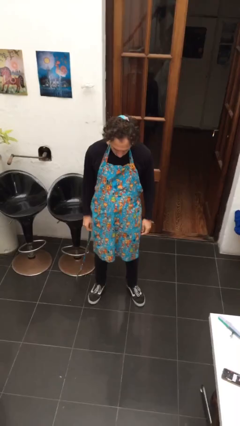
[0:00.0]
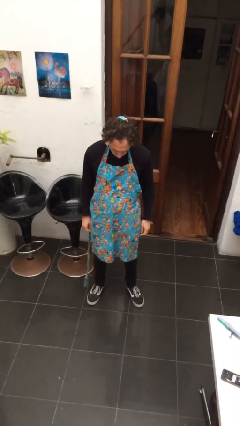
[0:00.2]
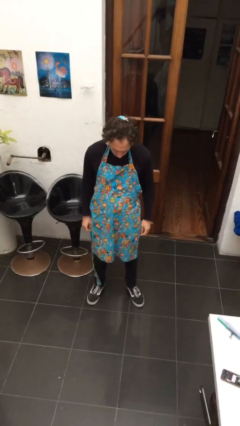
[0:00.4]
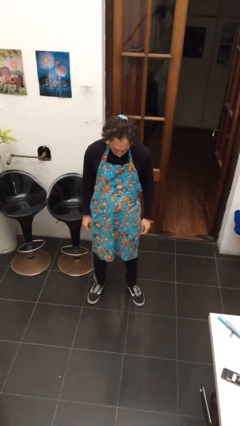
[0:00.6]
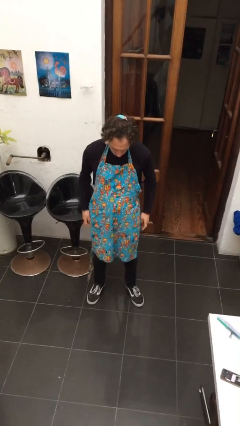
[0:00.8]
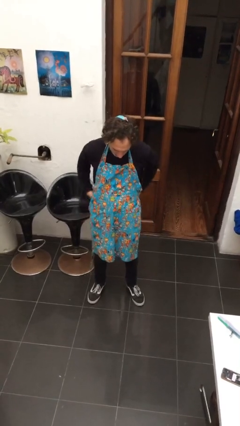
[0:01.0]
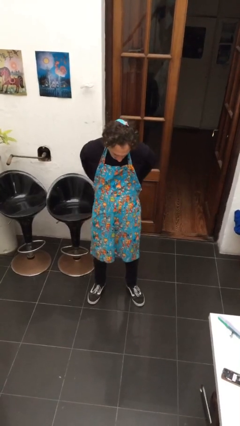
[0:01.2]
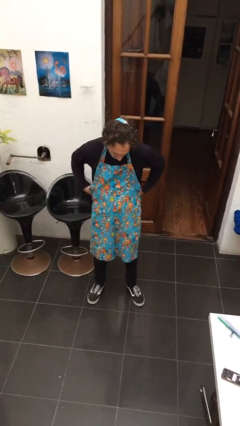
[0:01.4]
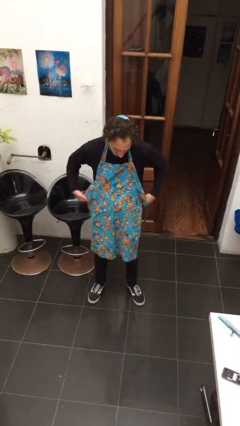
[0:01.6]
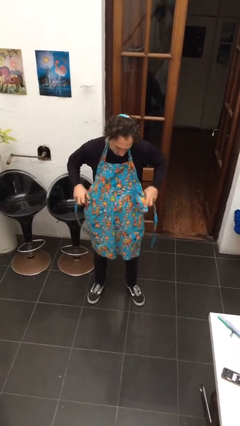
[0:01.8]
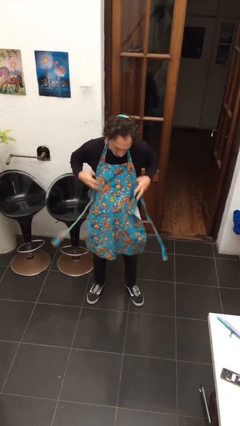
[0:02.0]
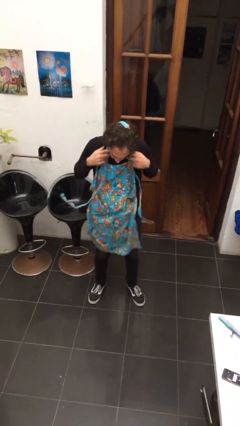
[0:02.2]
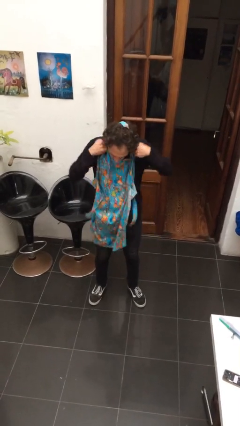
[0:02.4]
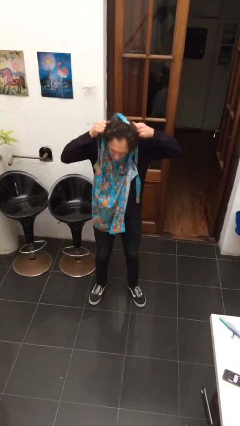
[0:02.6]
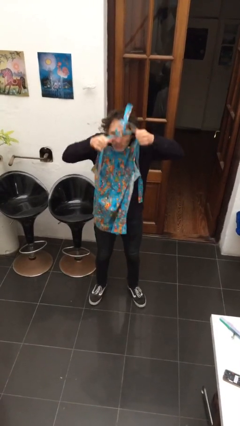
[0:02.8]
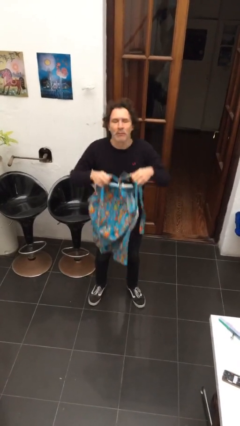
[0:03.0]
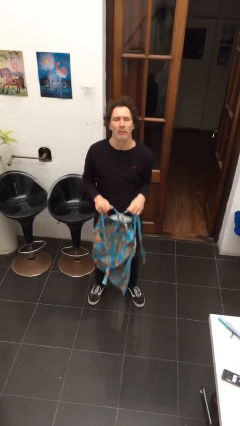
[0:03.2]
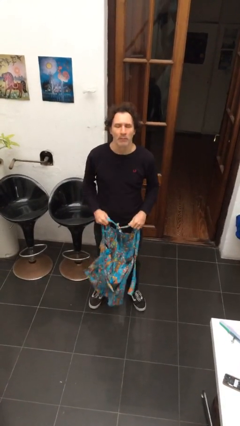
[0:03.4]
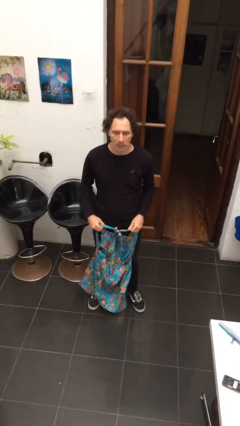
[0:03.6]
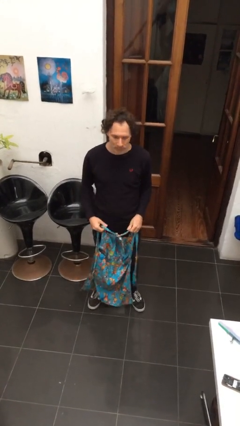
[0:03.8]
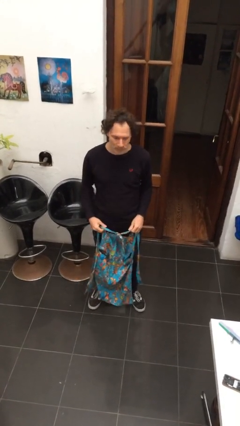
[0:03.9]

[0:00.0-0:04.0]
person takes off apron

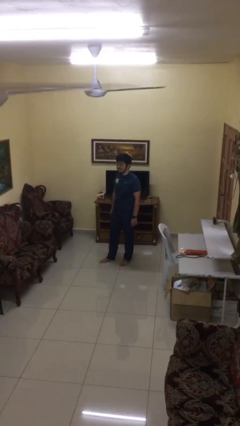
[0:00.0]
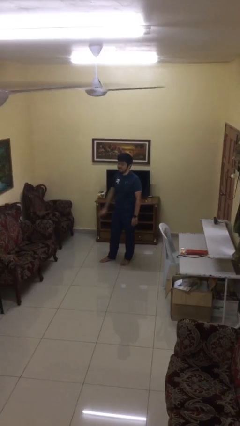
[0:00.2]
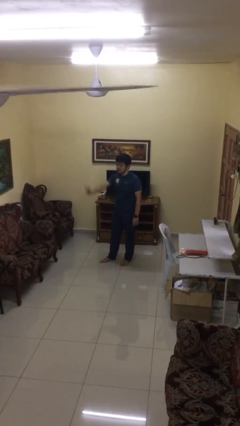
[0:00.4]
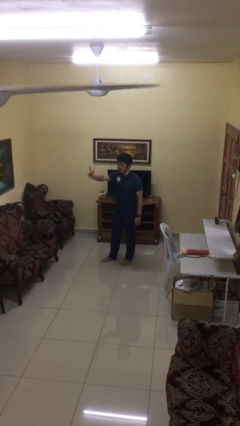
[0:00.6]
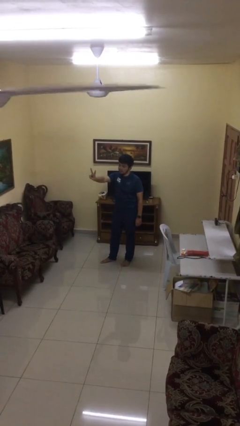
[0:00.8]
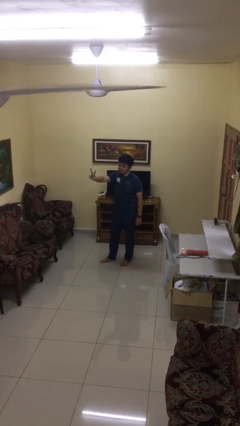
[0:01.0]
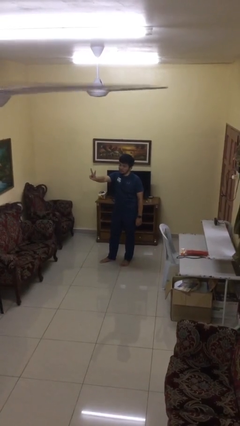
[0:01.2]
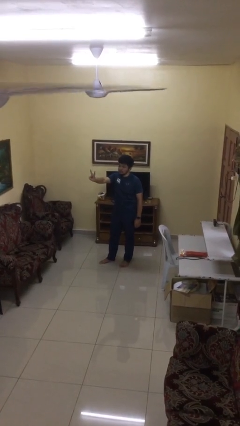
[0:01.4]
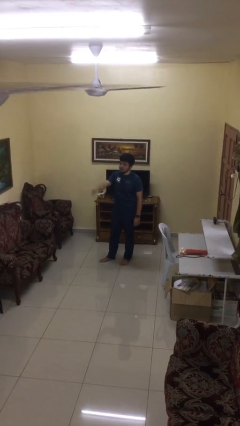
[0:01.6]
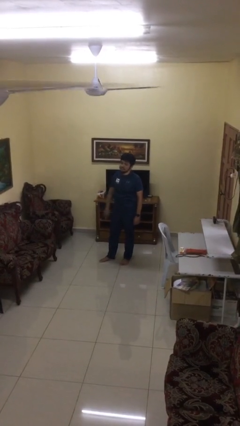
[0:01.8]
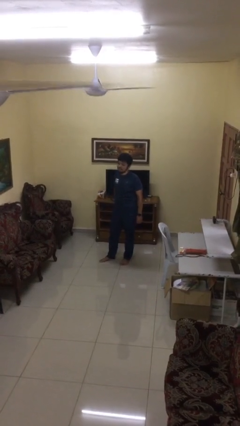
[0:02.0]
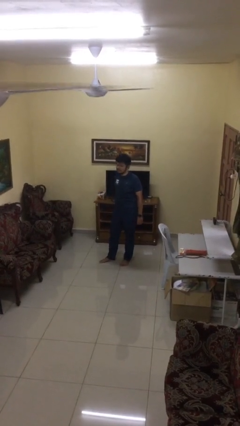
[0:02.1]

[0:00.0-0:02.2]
person gestures peace

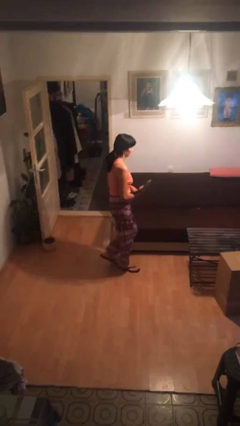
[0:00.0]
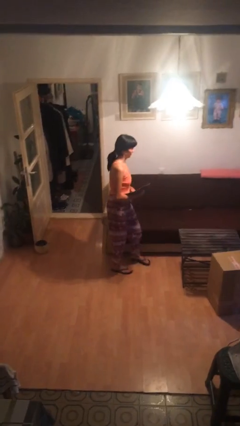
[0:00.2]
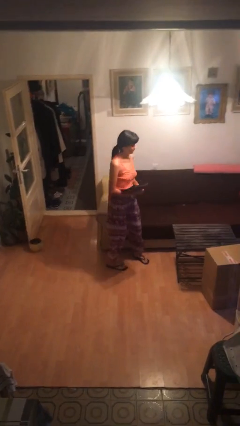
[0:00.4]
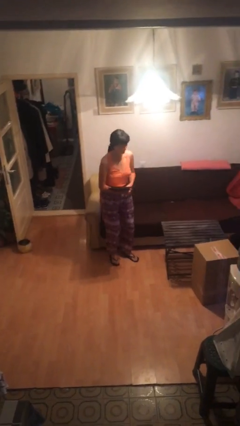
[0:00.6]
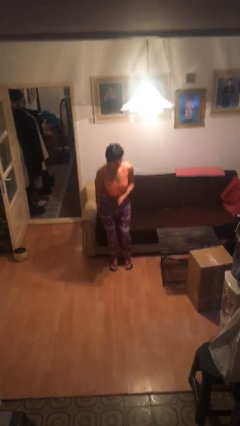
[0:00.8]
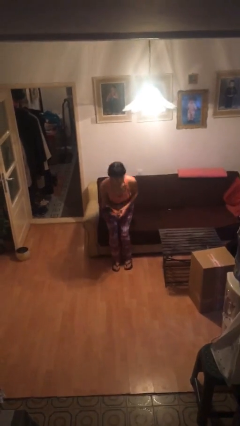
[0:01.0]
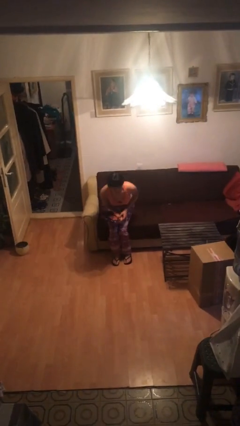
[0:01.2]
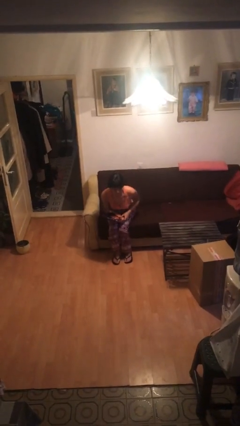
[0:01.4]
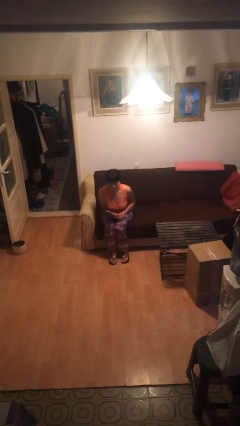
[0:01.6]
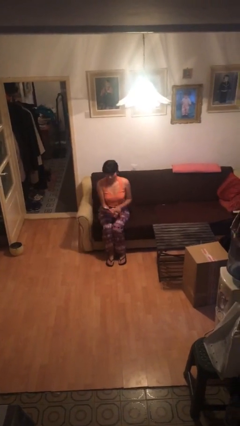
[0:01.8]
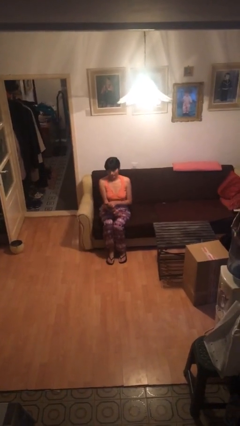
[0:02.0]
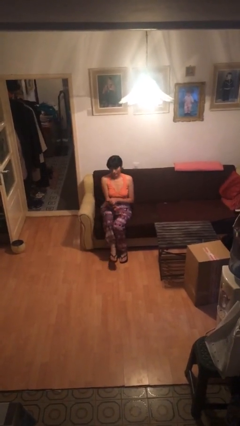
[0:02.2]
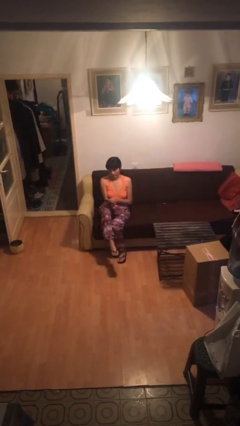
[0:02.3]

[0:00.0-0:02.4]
person sits down

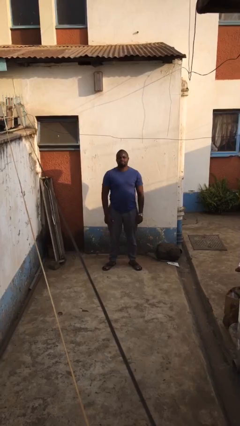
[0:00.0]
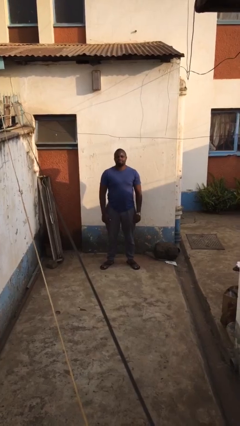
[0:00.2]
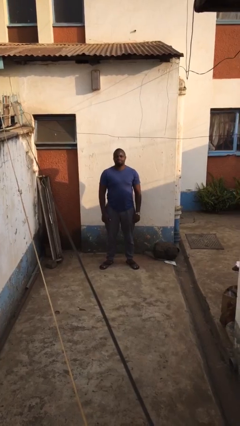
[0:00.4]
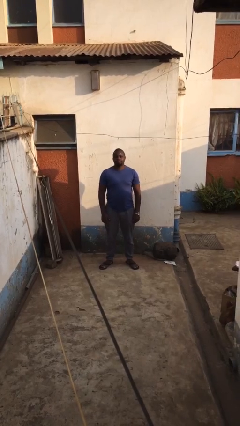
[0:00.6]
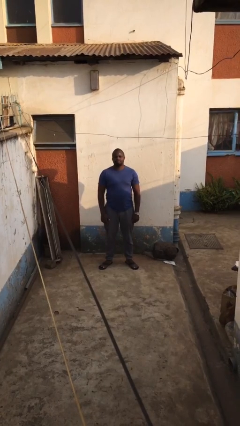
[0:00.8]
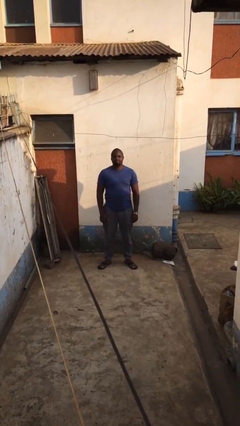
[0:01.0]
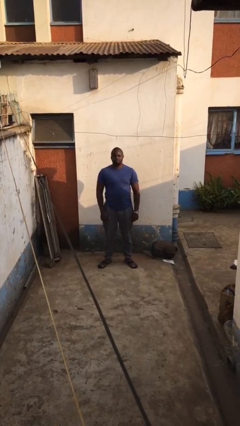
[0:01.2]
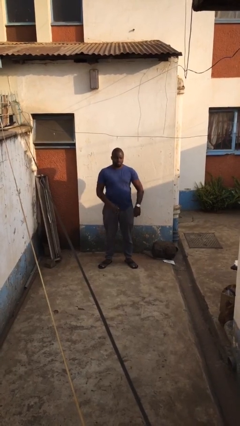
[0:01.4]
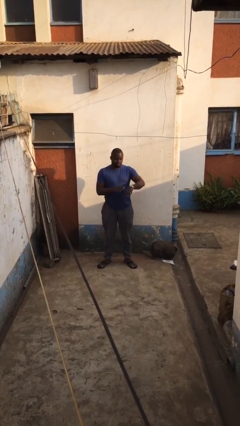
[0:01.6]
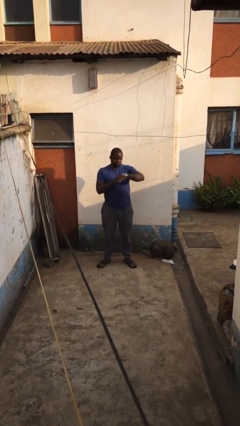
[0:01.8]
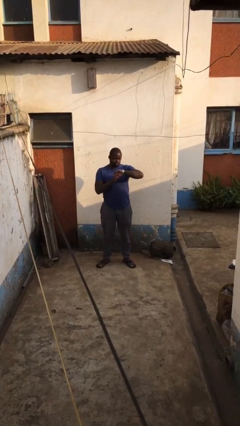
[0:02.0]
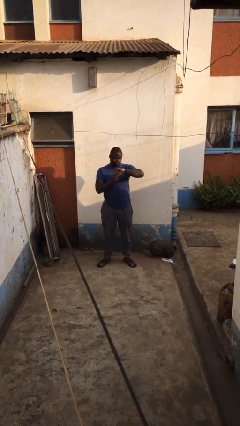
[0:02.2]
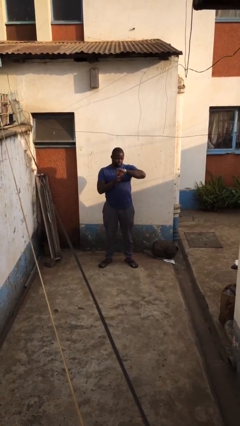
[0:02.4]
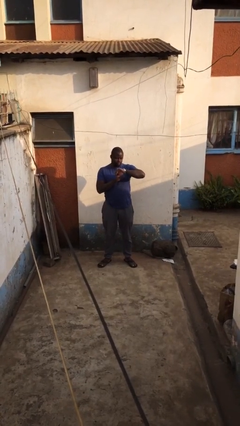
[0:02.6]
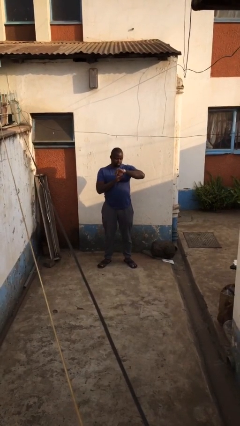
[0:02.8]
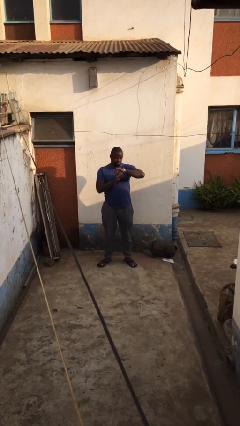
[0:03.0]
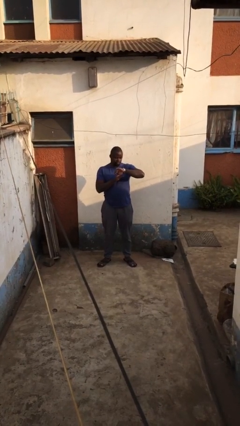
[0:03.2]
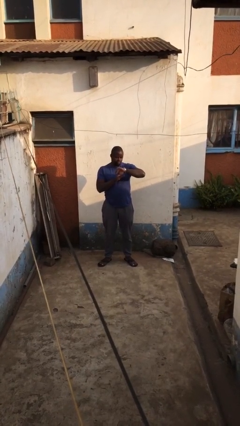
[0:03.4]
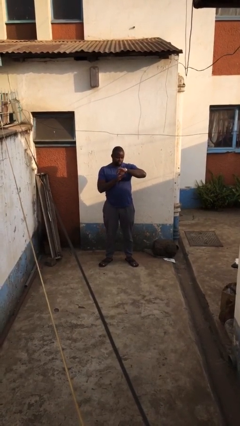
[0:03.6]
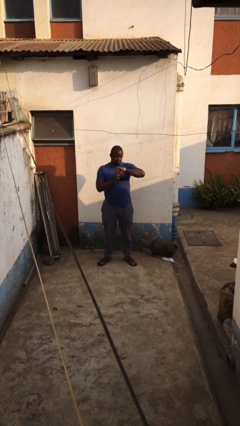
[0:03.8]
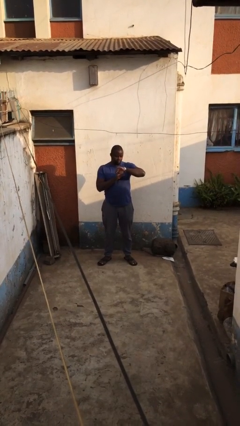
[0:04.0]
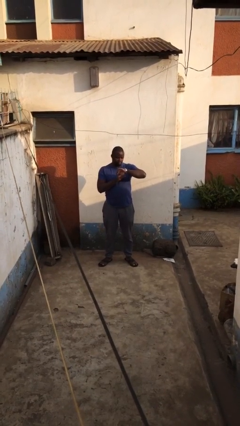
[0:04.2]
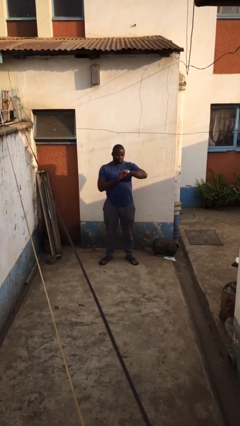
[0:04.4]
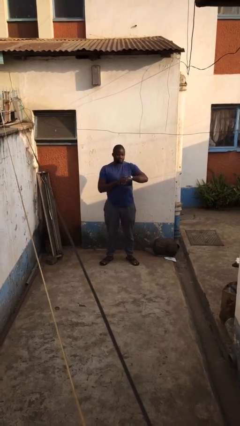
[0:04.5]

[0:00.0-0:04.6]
person looks at wristwatch

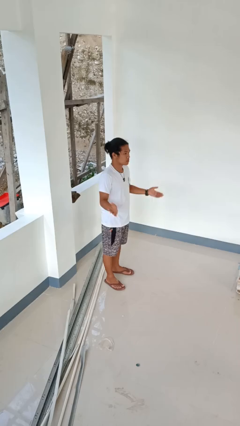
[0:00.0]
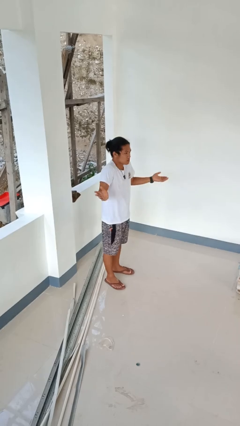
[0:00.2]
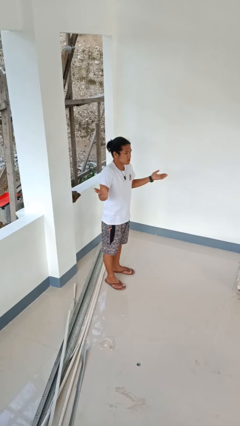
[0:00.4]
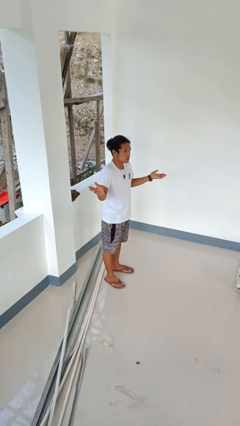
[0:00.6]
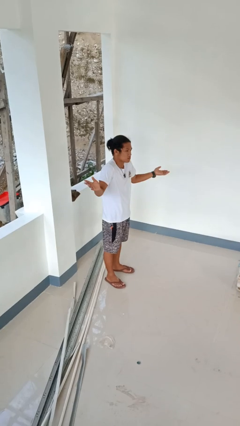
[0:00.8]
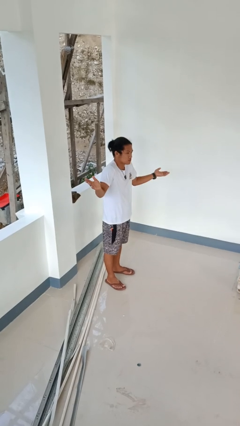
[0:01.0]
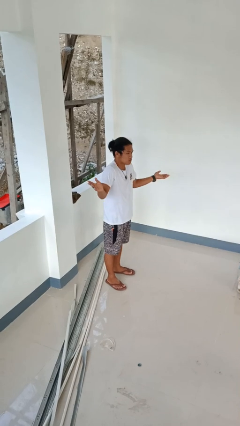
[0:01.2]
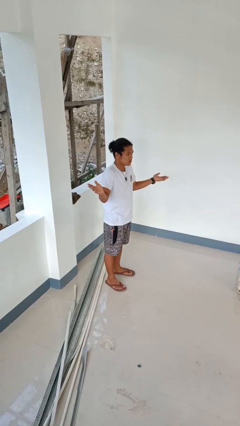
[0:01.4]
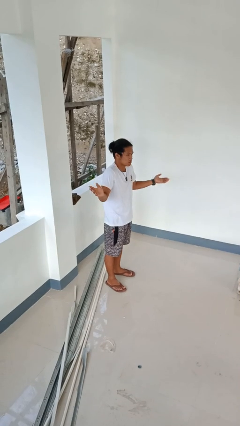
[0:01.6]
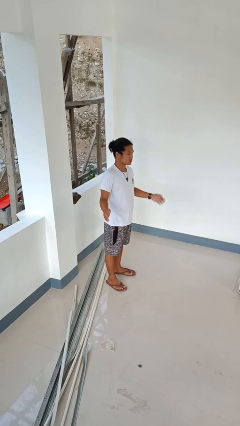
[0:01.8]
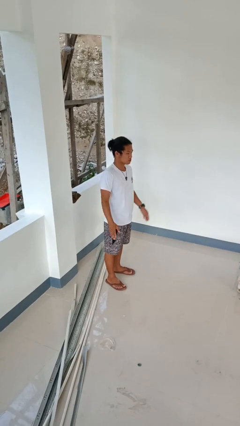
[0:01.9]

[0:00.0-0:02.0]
person shrugs

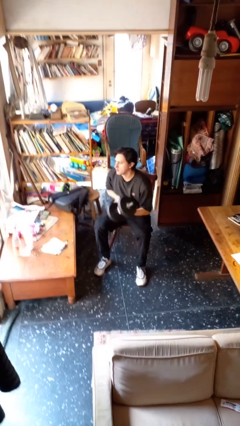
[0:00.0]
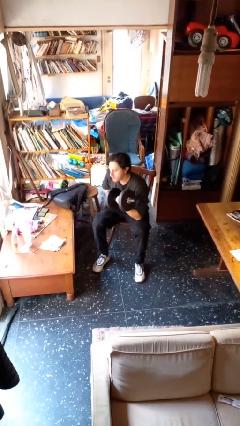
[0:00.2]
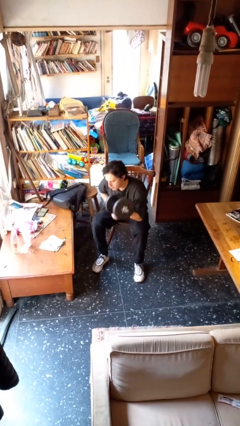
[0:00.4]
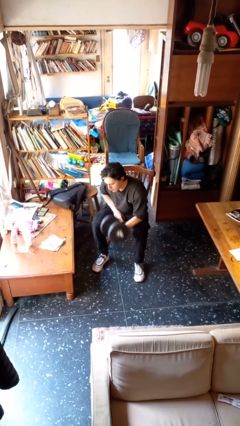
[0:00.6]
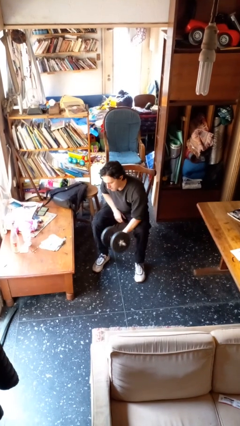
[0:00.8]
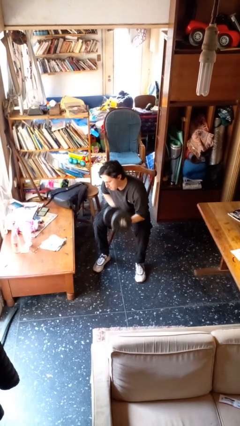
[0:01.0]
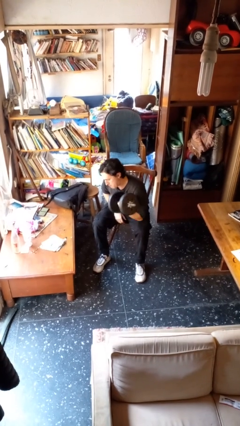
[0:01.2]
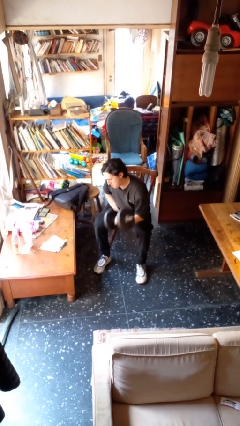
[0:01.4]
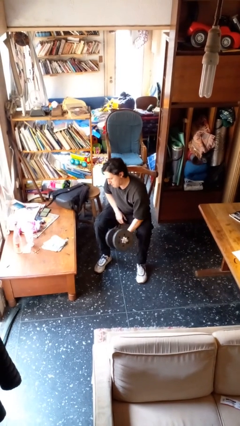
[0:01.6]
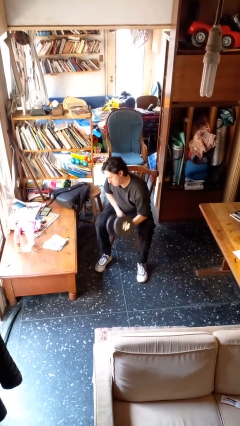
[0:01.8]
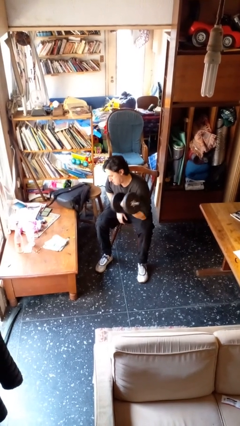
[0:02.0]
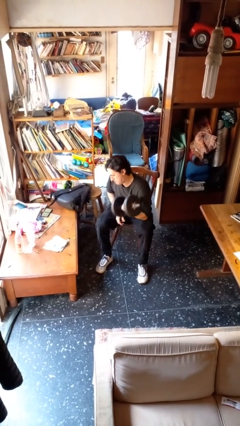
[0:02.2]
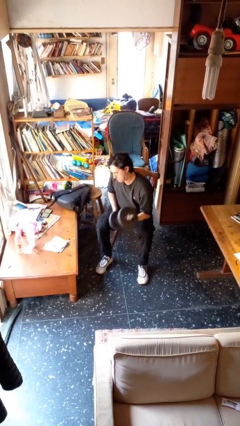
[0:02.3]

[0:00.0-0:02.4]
person lifts dumbbells
